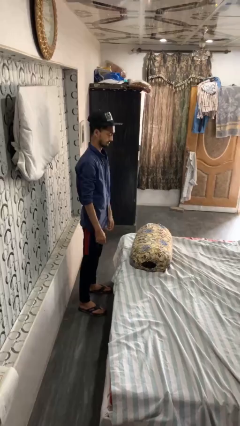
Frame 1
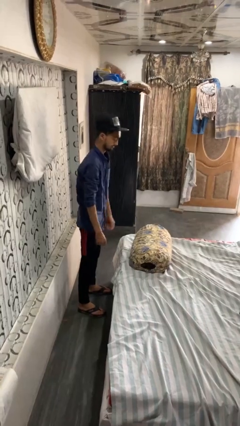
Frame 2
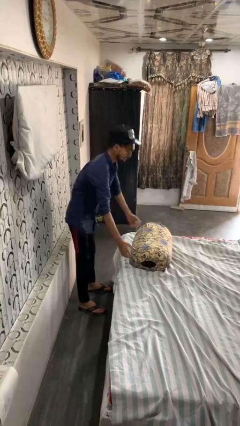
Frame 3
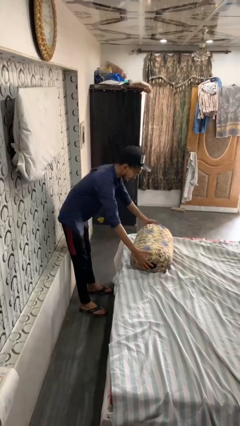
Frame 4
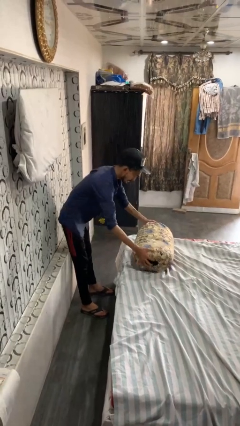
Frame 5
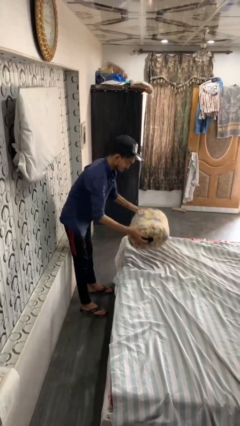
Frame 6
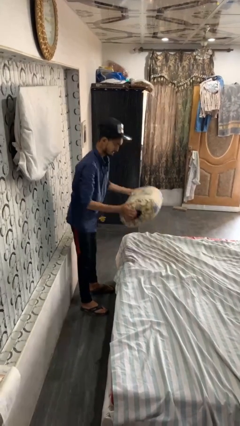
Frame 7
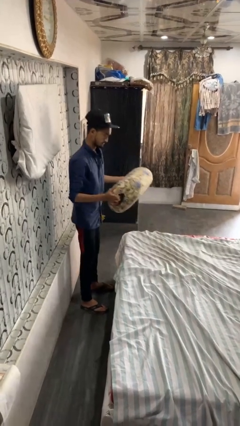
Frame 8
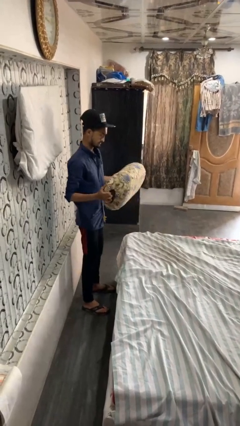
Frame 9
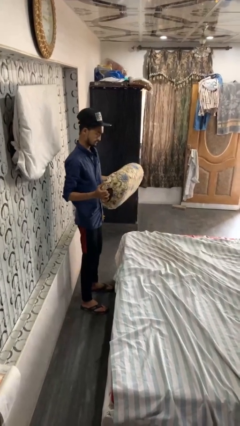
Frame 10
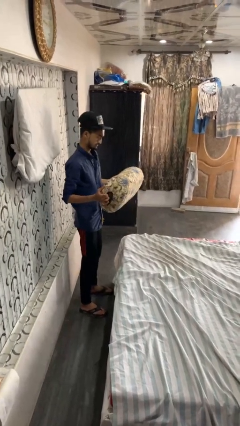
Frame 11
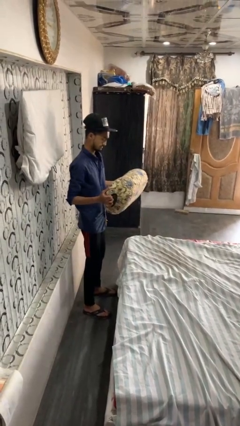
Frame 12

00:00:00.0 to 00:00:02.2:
person picks up object from bed

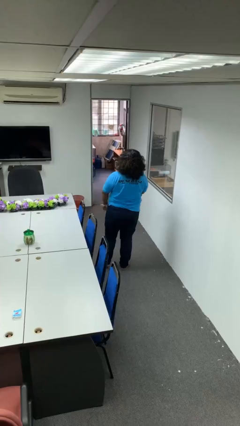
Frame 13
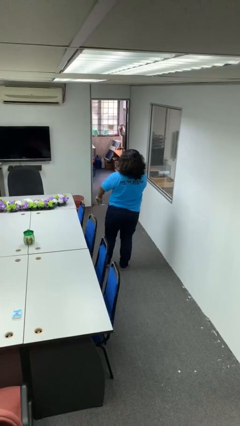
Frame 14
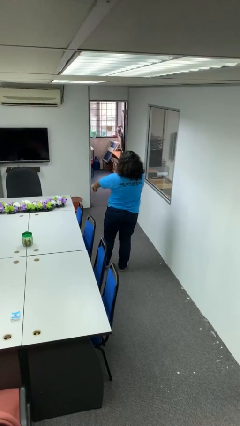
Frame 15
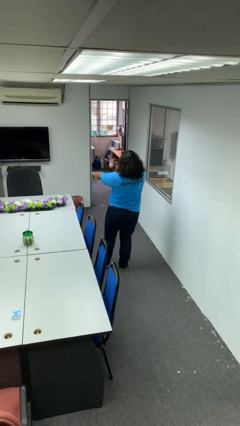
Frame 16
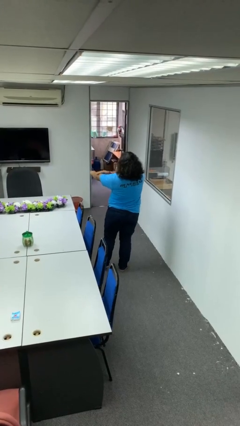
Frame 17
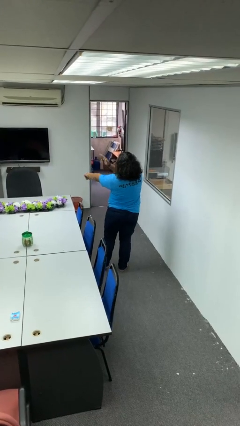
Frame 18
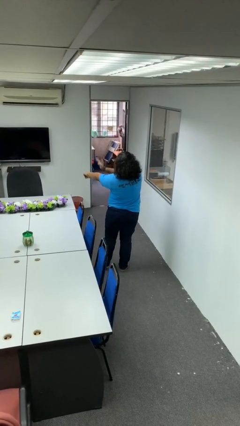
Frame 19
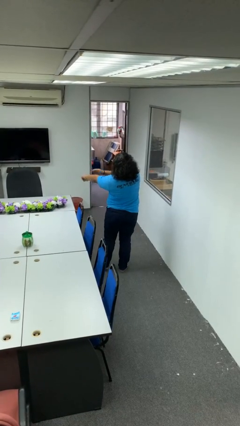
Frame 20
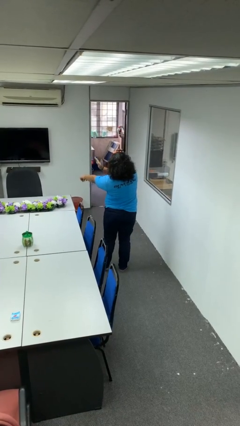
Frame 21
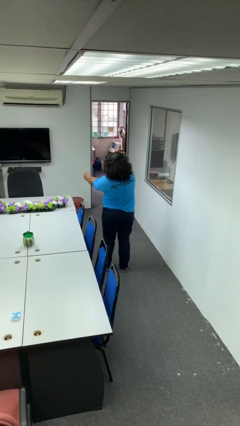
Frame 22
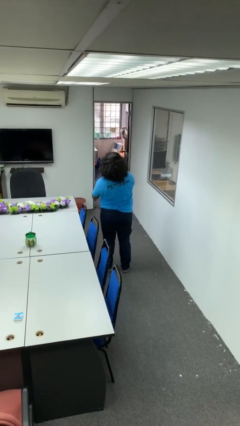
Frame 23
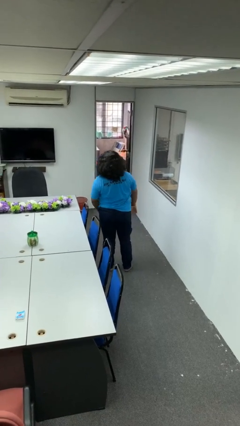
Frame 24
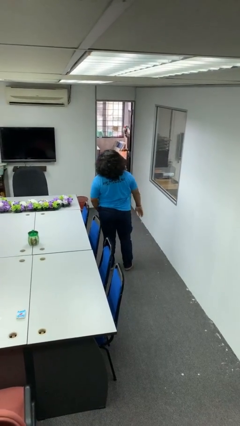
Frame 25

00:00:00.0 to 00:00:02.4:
person swats bug

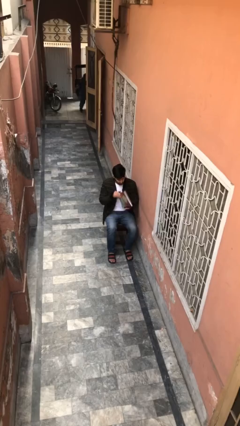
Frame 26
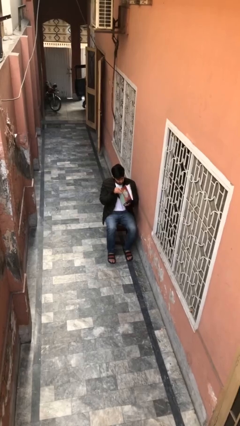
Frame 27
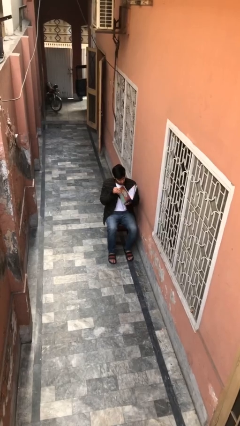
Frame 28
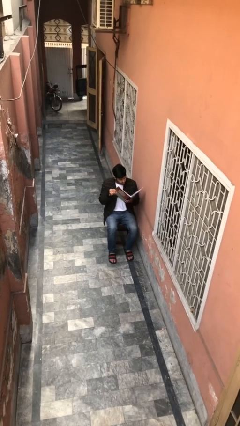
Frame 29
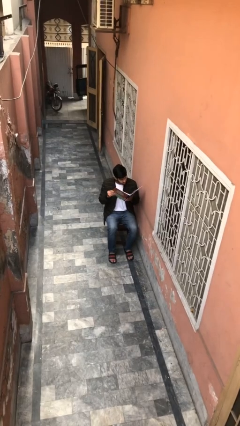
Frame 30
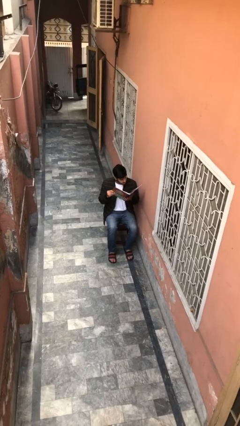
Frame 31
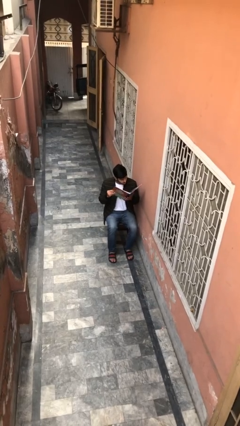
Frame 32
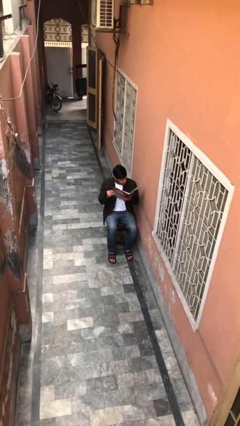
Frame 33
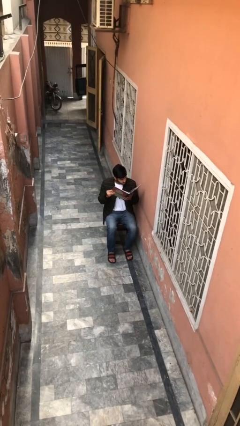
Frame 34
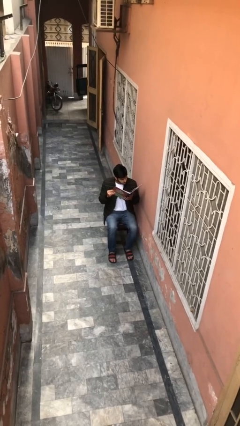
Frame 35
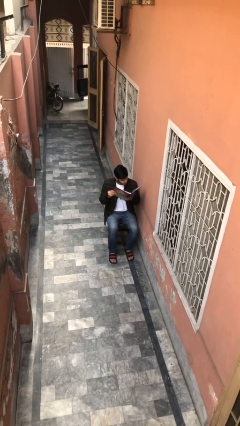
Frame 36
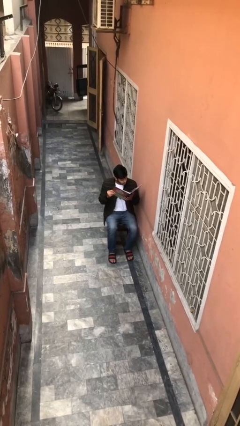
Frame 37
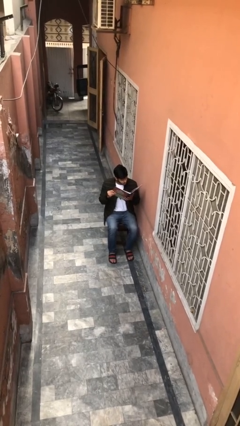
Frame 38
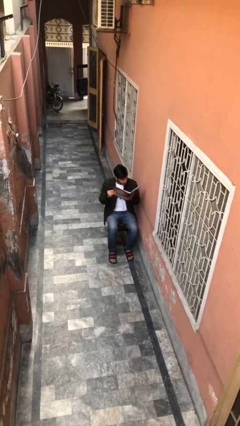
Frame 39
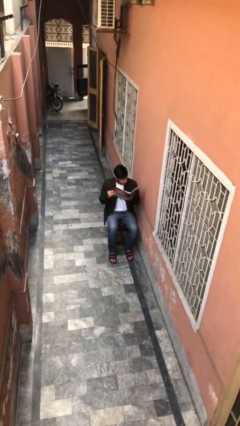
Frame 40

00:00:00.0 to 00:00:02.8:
person reads document

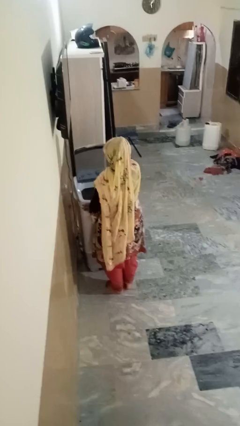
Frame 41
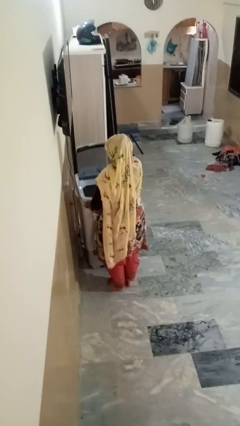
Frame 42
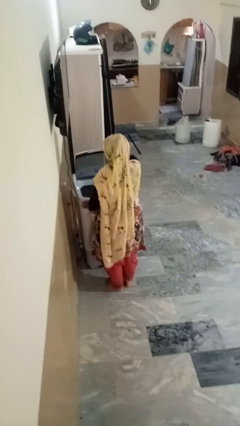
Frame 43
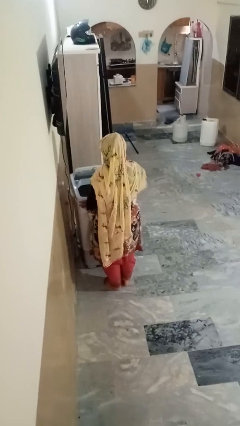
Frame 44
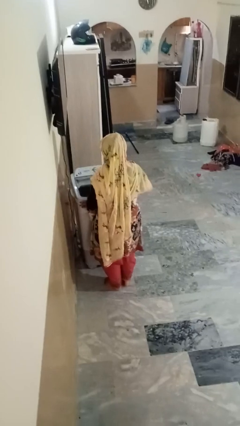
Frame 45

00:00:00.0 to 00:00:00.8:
person closes clothes washer

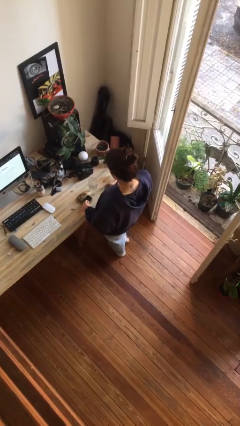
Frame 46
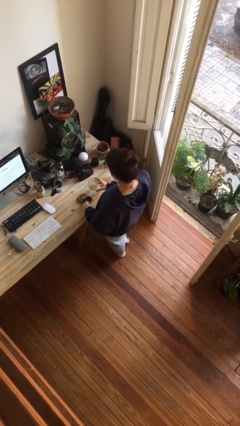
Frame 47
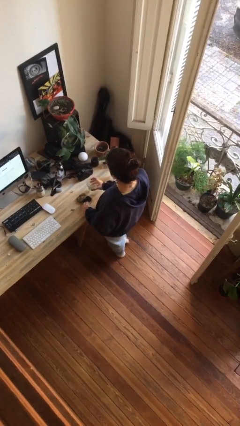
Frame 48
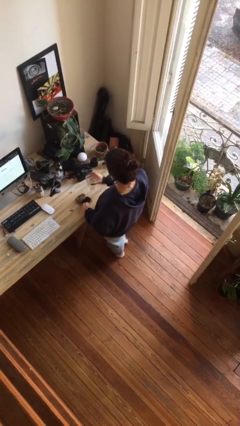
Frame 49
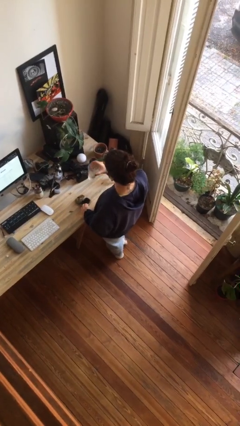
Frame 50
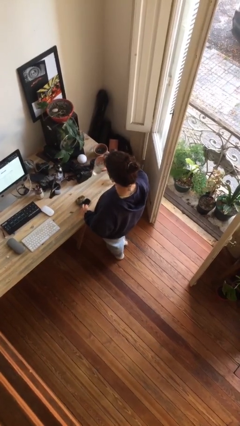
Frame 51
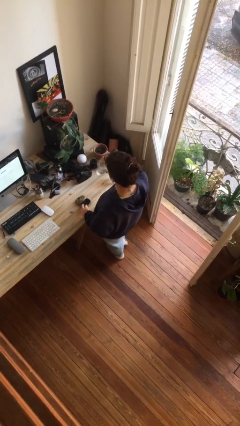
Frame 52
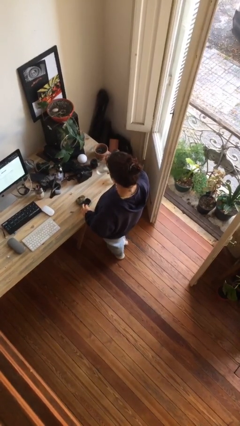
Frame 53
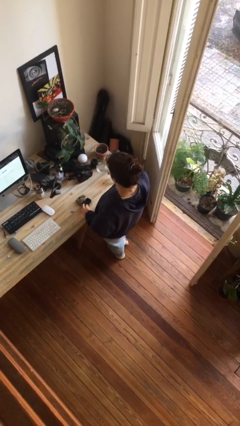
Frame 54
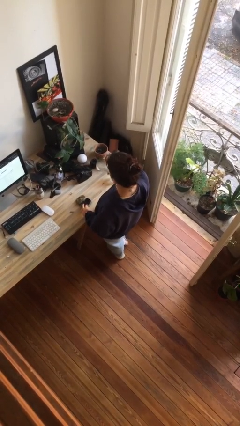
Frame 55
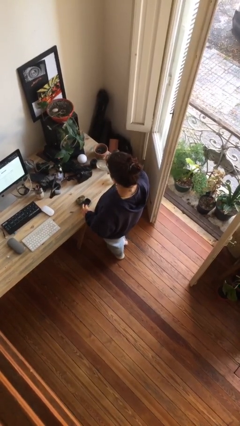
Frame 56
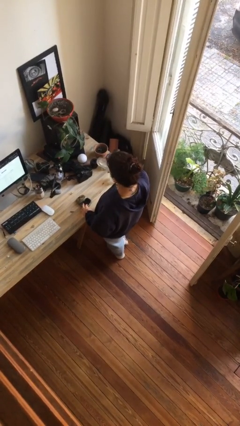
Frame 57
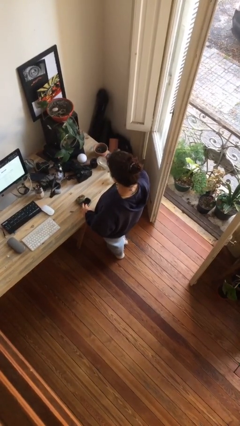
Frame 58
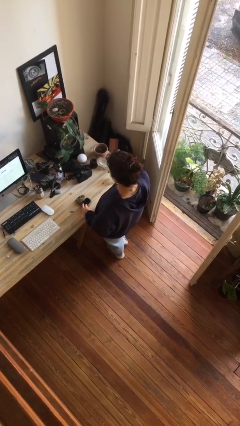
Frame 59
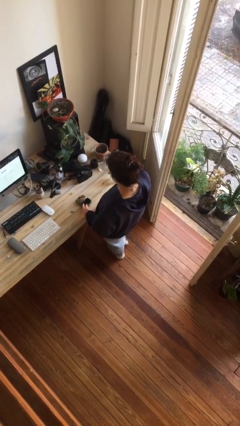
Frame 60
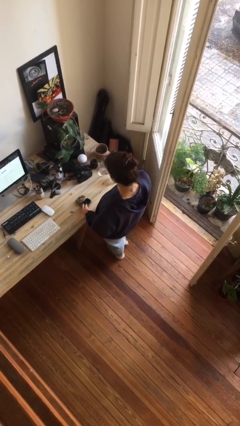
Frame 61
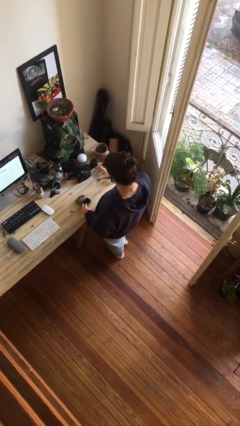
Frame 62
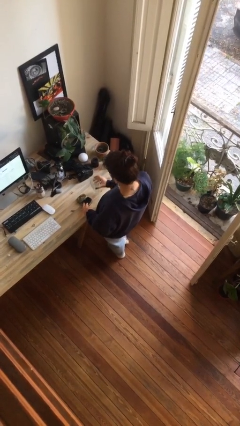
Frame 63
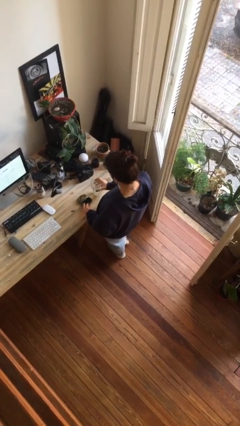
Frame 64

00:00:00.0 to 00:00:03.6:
person drinks from cup

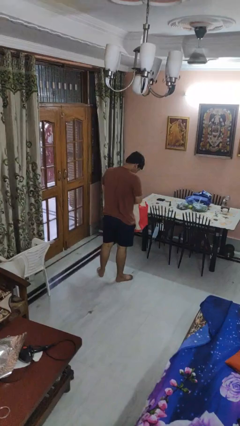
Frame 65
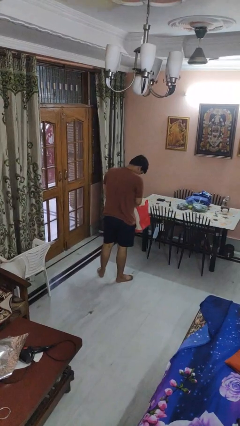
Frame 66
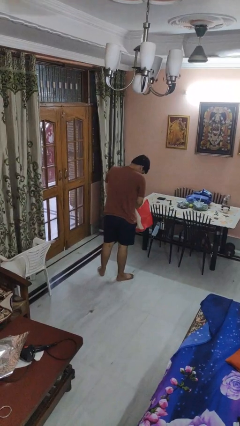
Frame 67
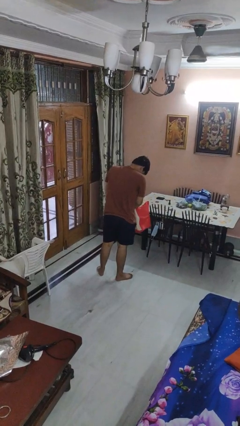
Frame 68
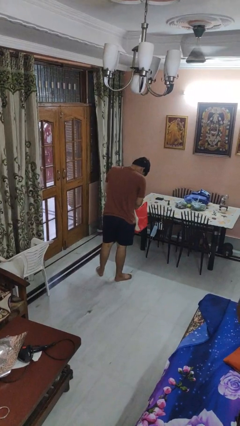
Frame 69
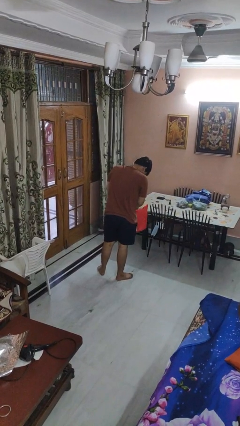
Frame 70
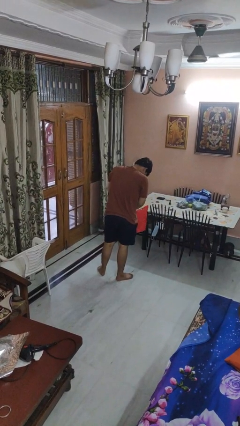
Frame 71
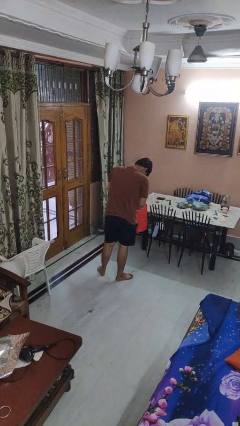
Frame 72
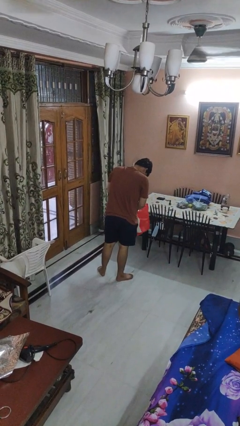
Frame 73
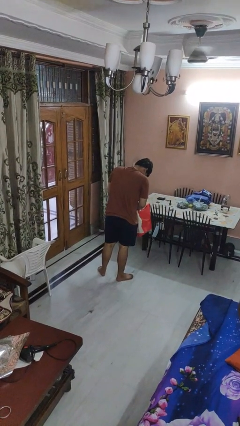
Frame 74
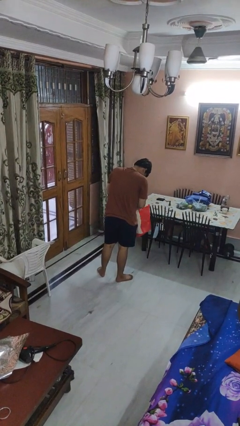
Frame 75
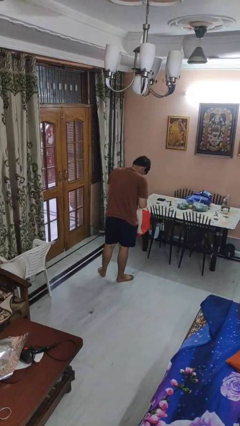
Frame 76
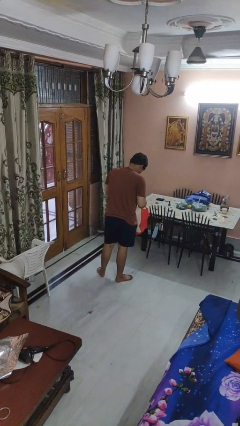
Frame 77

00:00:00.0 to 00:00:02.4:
person searches in bag

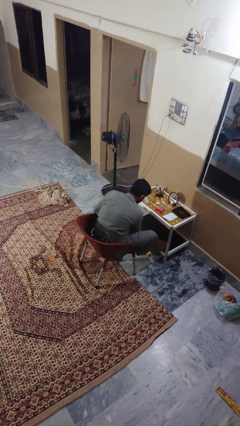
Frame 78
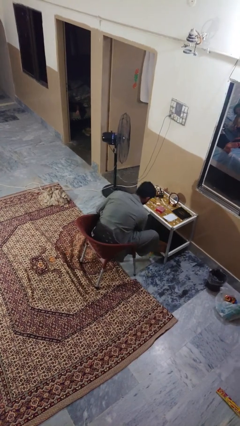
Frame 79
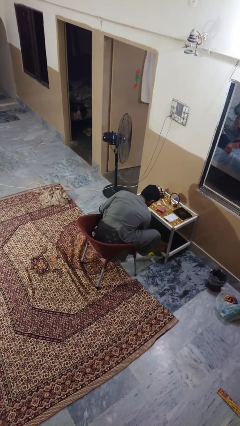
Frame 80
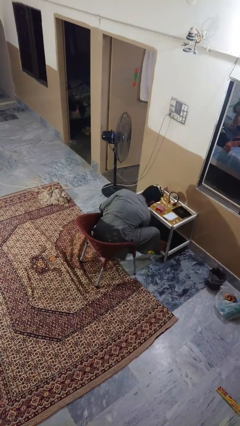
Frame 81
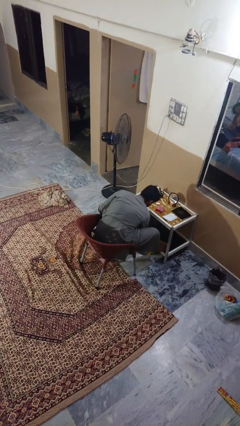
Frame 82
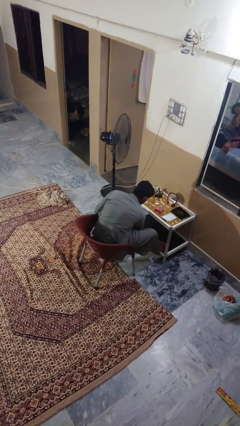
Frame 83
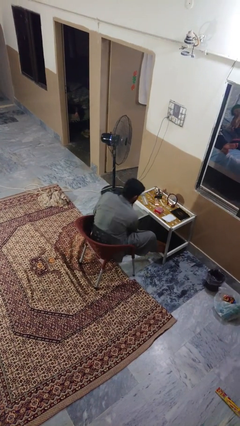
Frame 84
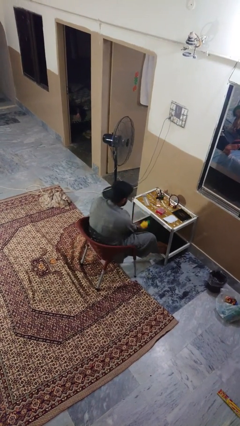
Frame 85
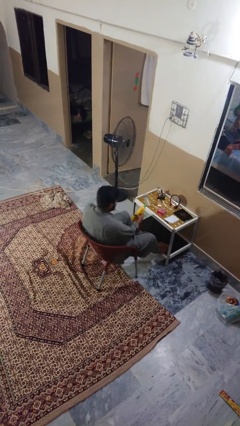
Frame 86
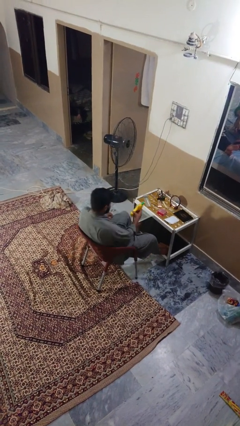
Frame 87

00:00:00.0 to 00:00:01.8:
person picks up object from floor

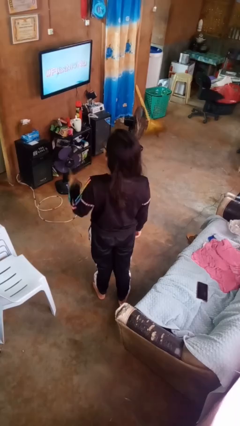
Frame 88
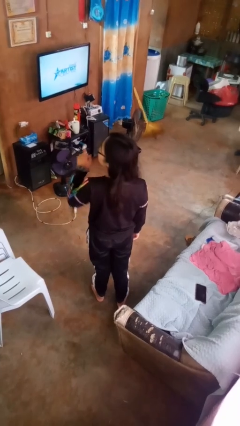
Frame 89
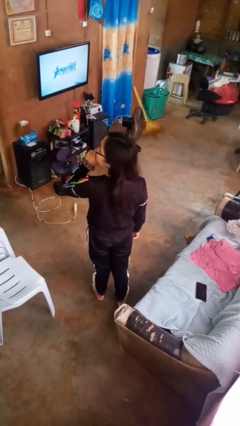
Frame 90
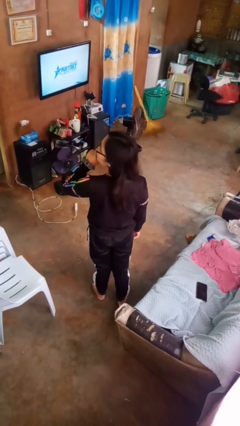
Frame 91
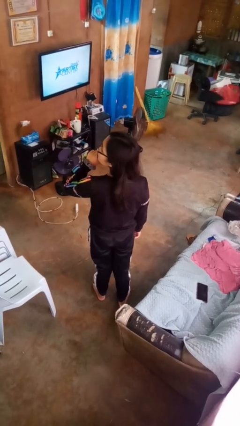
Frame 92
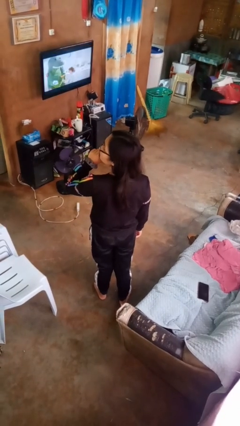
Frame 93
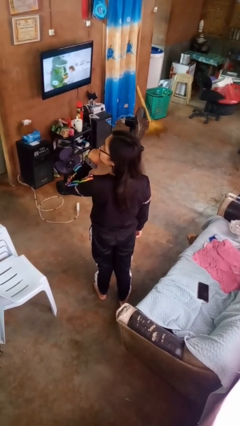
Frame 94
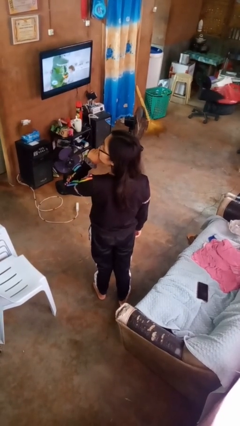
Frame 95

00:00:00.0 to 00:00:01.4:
person gestures be quiet
